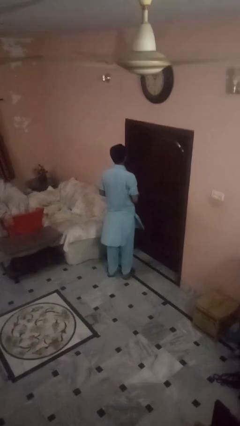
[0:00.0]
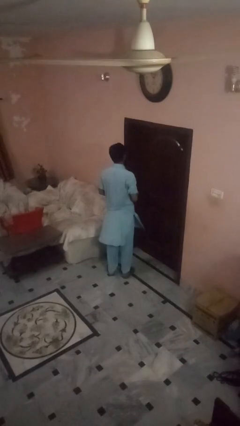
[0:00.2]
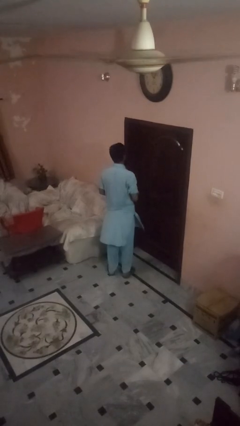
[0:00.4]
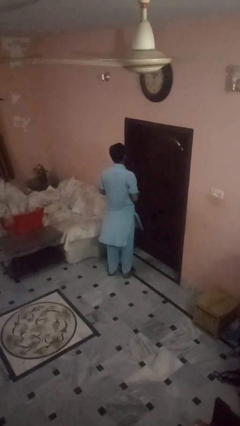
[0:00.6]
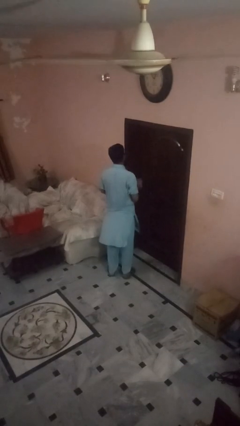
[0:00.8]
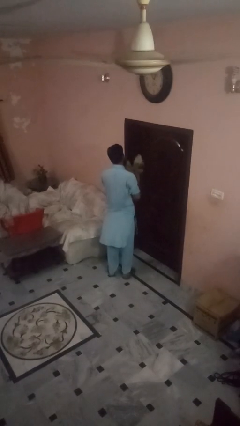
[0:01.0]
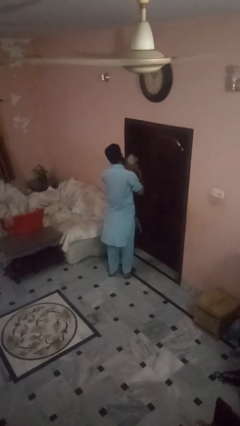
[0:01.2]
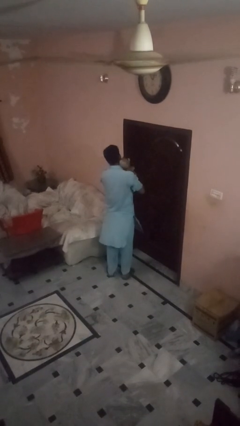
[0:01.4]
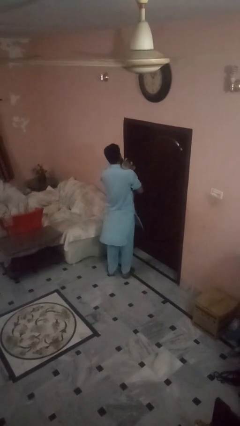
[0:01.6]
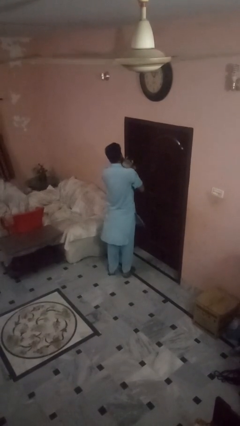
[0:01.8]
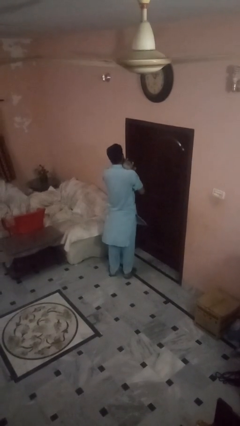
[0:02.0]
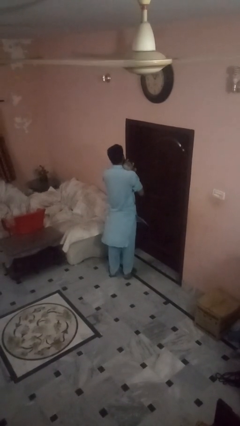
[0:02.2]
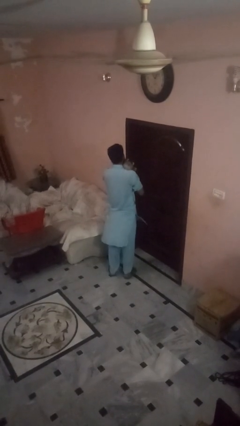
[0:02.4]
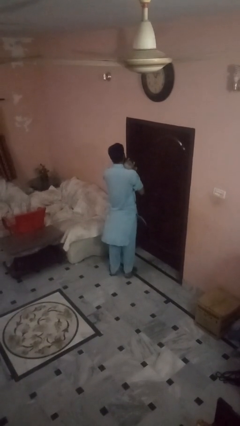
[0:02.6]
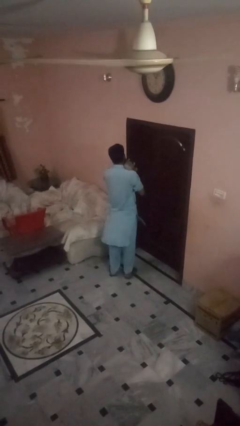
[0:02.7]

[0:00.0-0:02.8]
person hugs stuffed animal

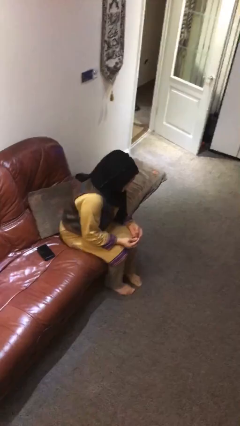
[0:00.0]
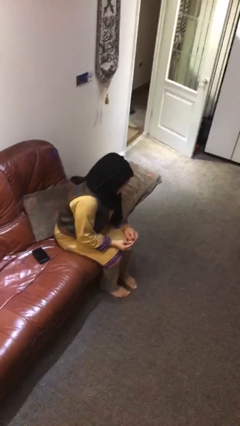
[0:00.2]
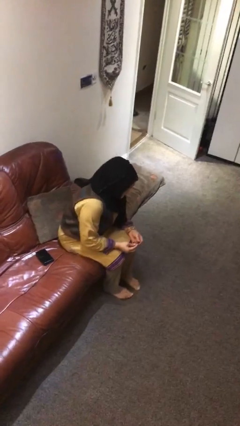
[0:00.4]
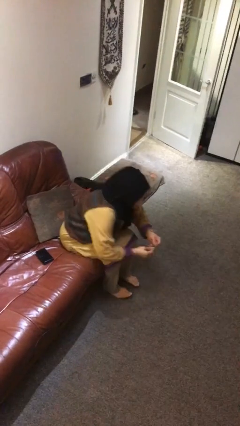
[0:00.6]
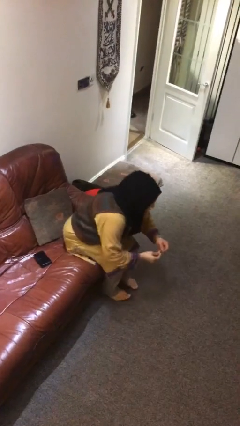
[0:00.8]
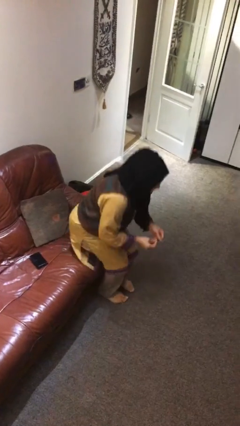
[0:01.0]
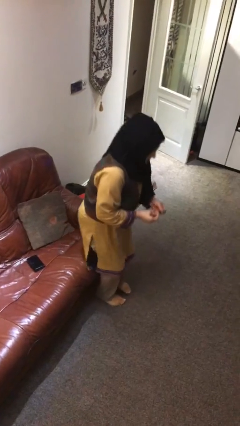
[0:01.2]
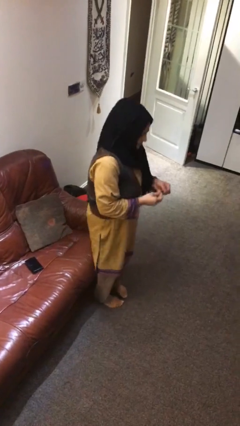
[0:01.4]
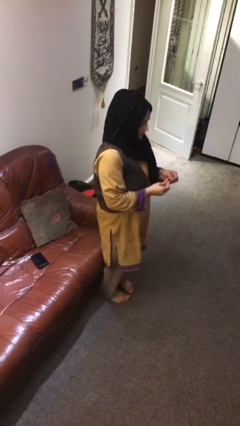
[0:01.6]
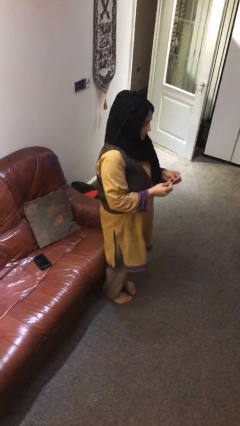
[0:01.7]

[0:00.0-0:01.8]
person stands up

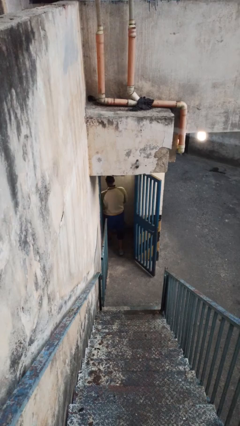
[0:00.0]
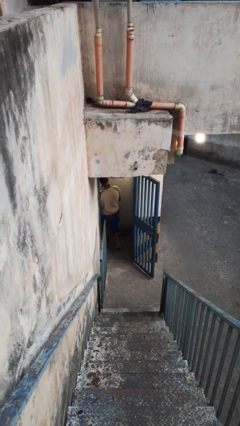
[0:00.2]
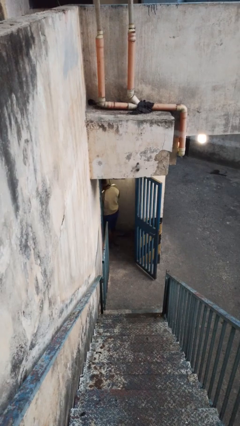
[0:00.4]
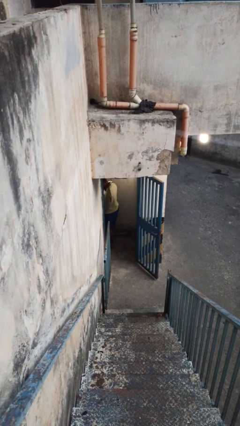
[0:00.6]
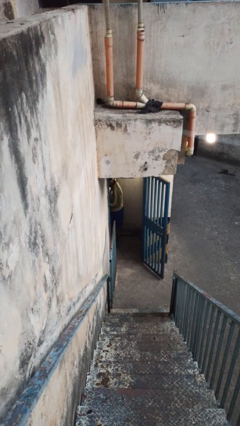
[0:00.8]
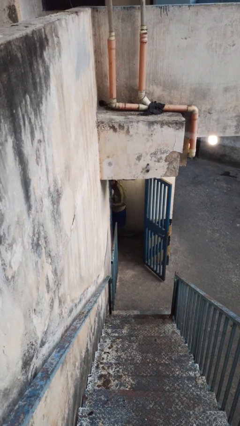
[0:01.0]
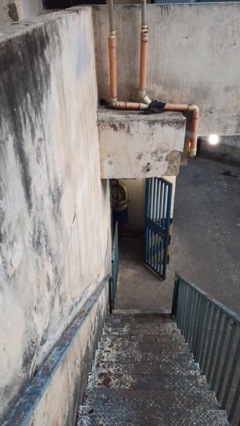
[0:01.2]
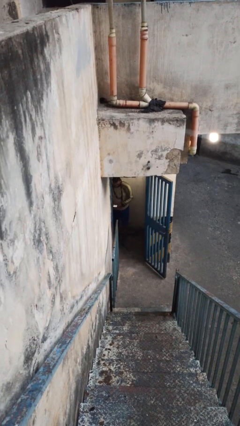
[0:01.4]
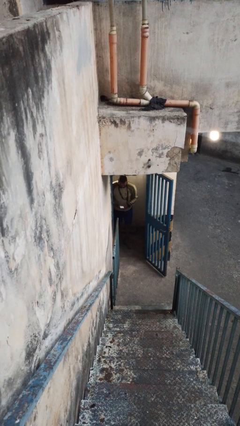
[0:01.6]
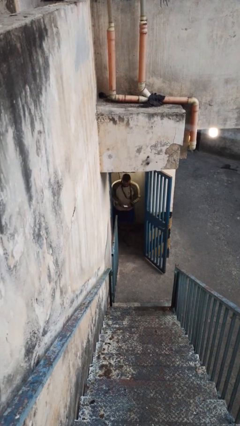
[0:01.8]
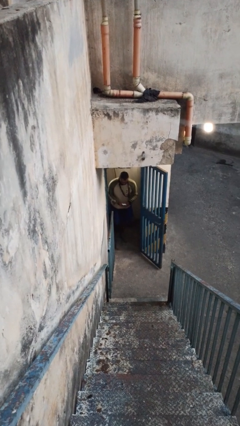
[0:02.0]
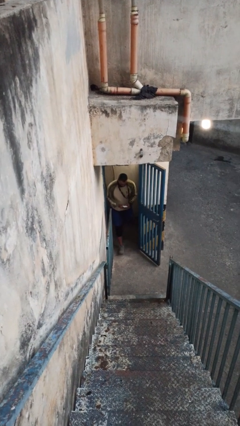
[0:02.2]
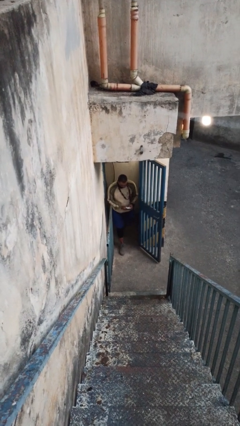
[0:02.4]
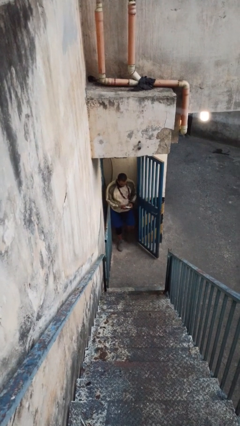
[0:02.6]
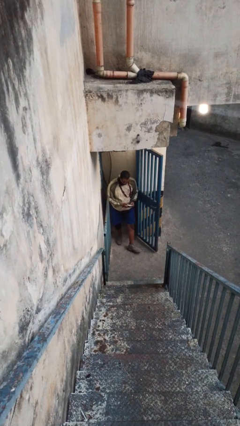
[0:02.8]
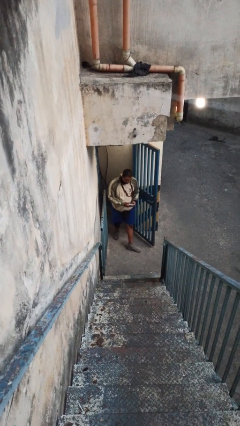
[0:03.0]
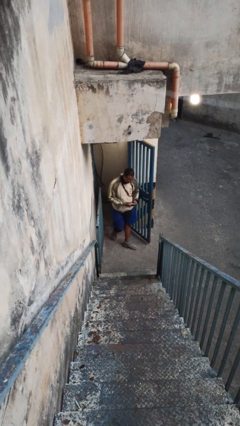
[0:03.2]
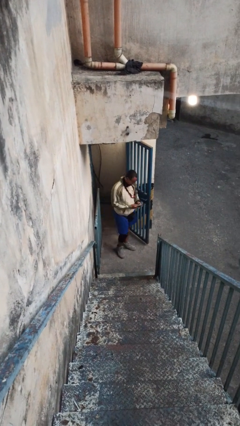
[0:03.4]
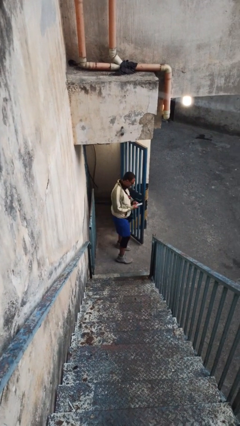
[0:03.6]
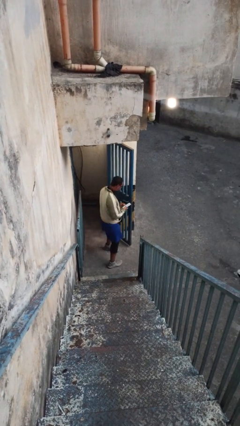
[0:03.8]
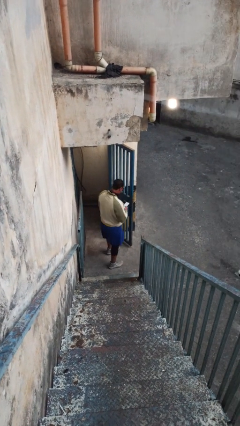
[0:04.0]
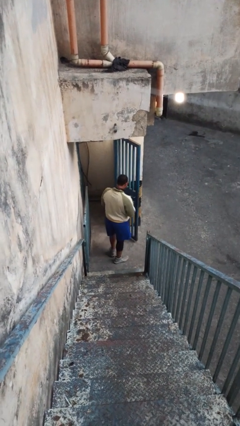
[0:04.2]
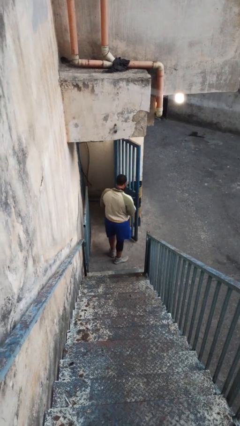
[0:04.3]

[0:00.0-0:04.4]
person enters scene through structure

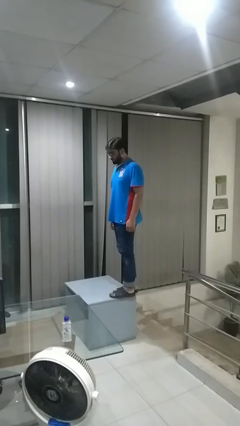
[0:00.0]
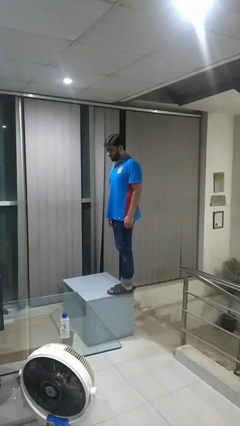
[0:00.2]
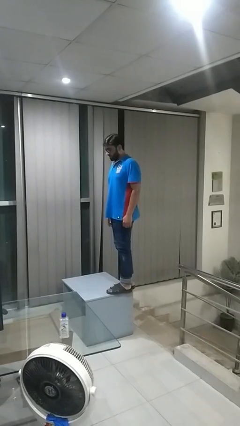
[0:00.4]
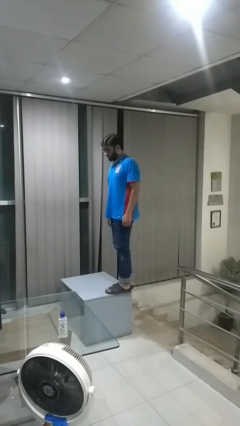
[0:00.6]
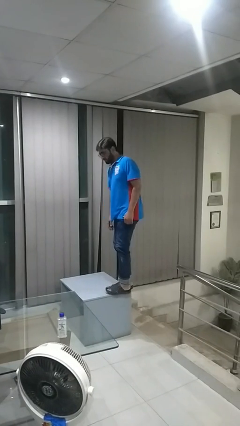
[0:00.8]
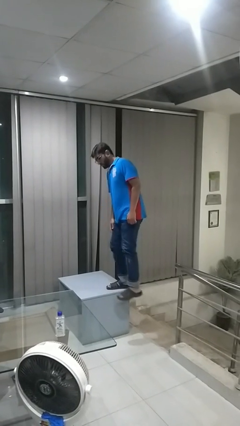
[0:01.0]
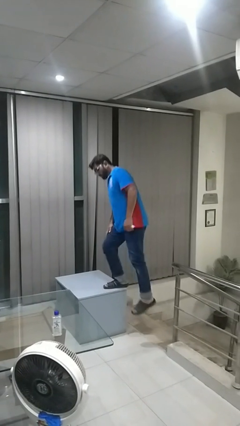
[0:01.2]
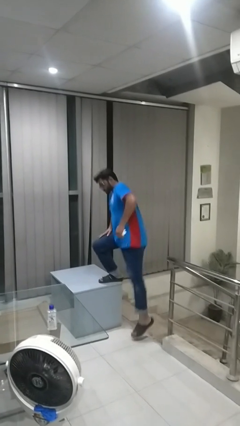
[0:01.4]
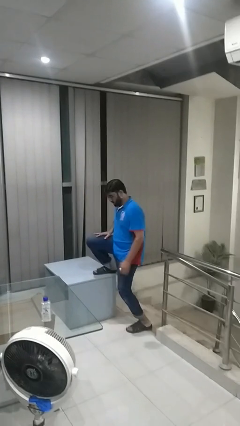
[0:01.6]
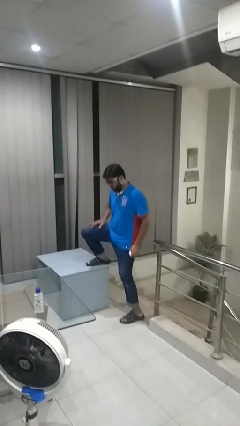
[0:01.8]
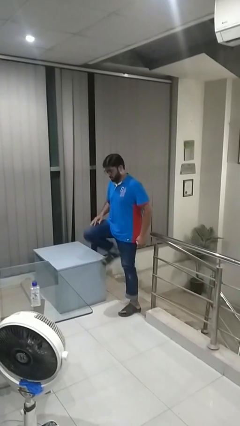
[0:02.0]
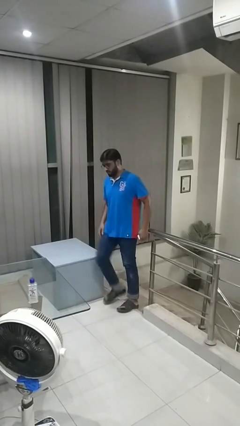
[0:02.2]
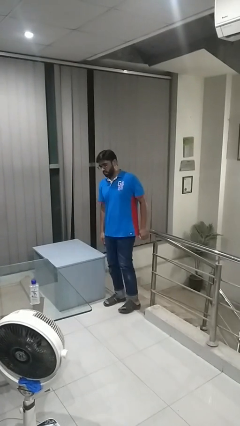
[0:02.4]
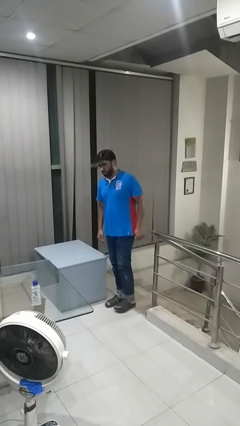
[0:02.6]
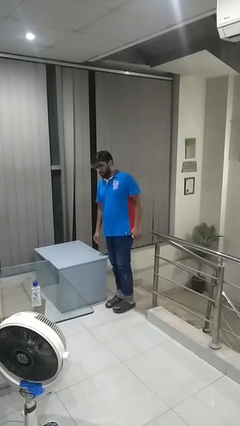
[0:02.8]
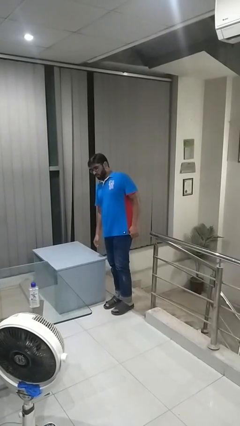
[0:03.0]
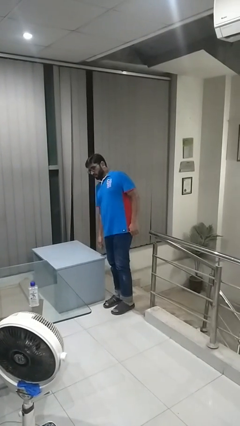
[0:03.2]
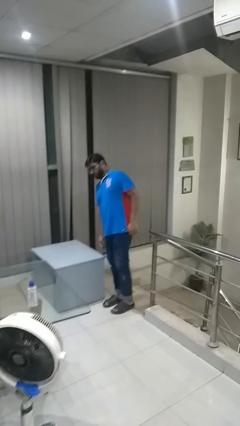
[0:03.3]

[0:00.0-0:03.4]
person climbs off table

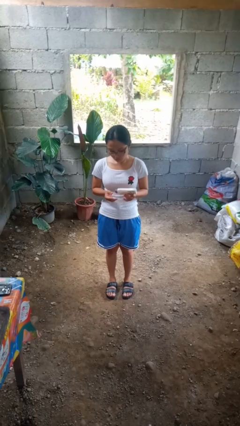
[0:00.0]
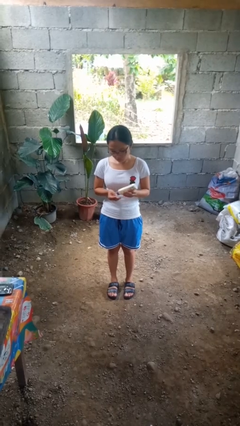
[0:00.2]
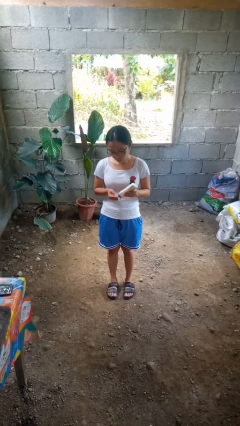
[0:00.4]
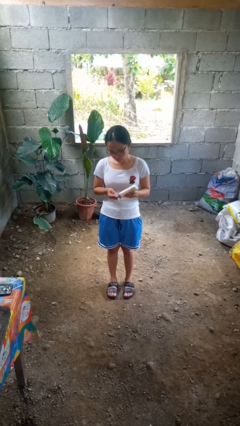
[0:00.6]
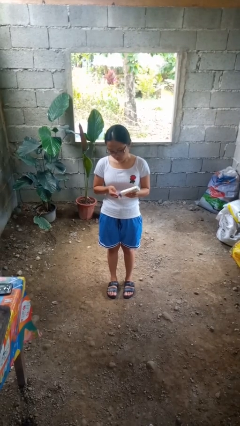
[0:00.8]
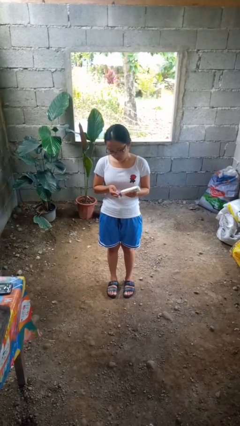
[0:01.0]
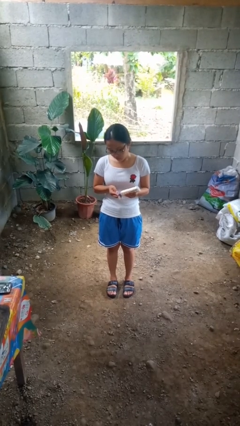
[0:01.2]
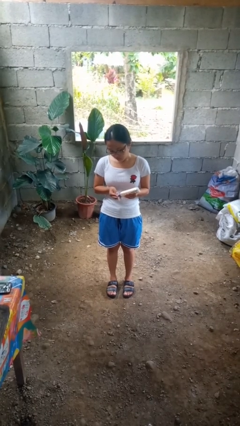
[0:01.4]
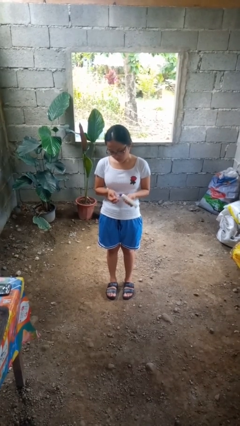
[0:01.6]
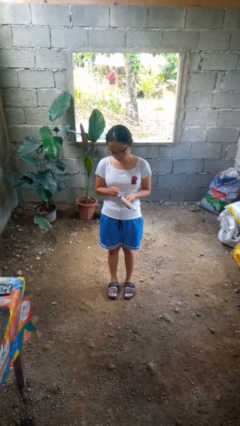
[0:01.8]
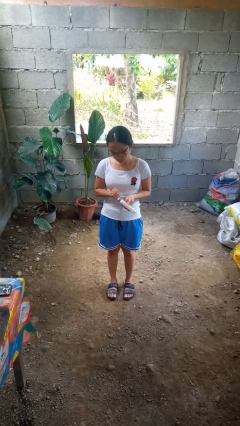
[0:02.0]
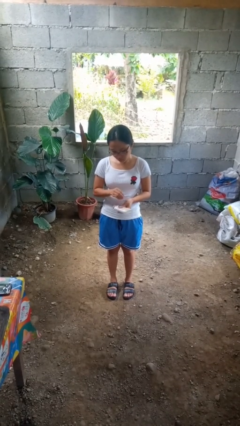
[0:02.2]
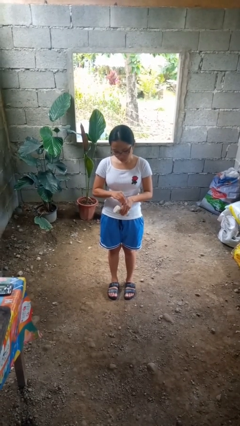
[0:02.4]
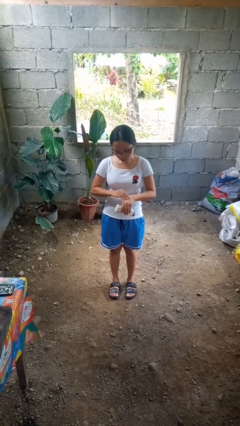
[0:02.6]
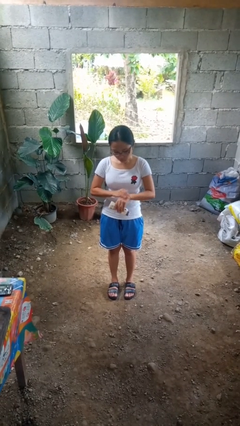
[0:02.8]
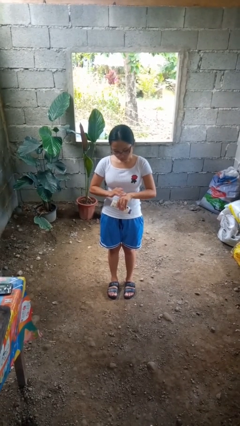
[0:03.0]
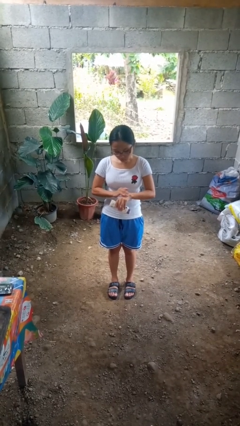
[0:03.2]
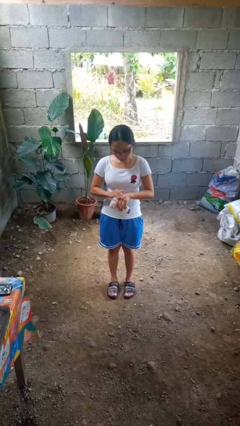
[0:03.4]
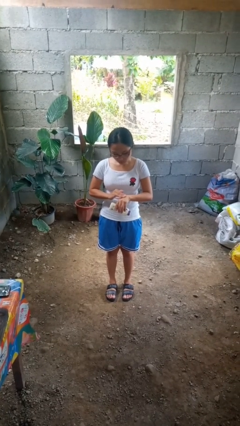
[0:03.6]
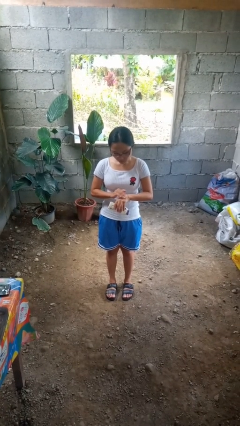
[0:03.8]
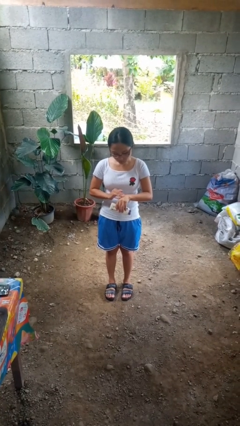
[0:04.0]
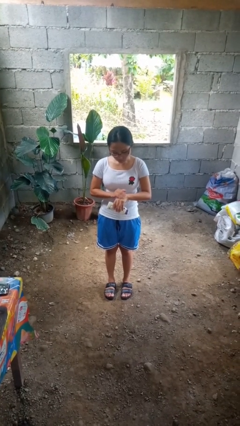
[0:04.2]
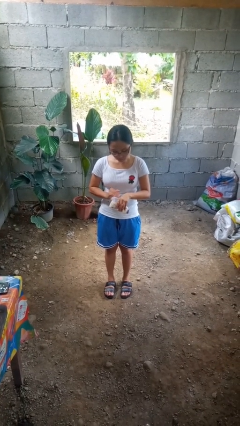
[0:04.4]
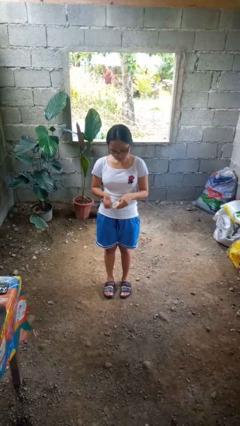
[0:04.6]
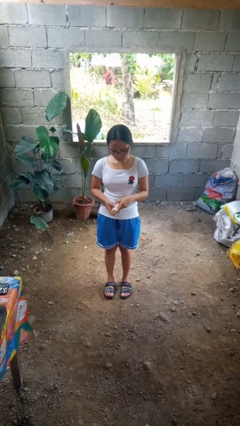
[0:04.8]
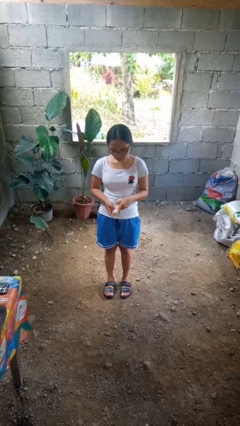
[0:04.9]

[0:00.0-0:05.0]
person applies sunscreen
